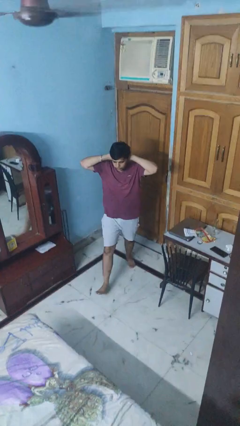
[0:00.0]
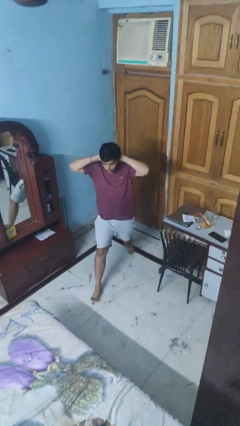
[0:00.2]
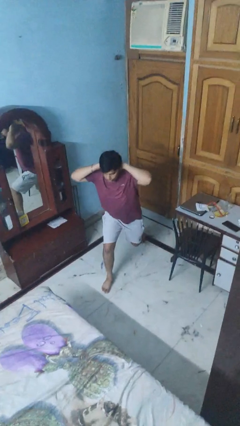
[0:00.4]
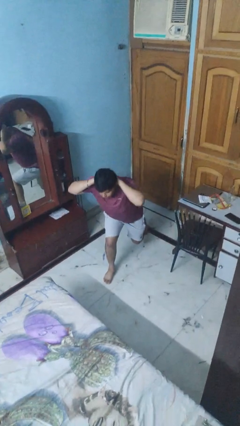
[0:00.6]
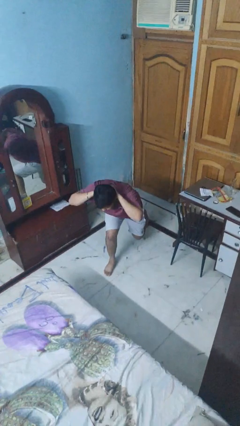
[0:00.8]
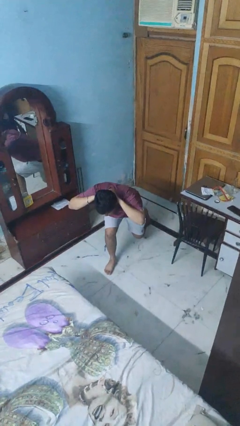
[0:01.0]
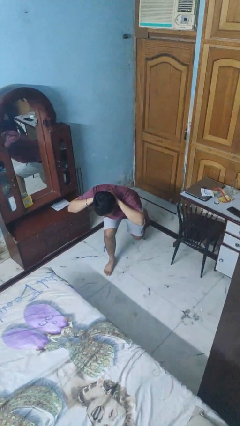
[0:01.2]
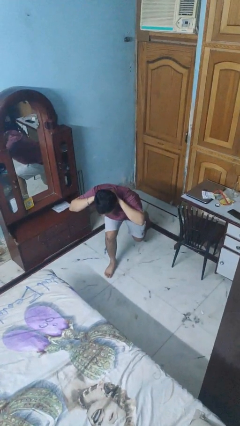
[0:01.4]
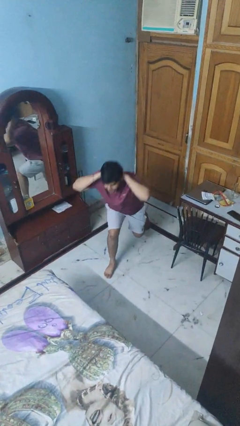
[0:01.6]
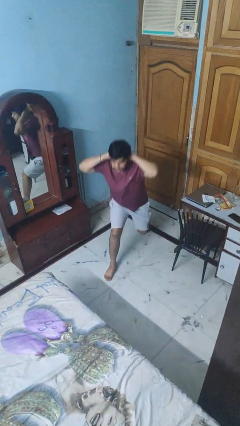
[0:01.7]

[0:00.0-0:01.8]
person exercises with lunges

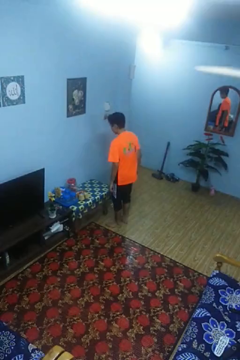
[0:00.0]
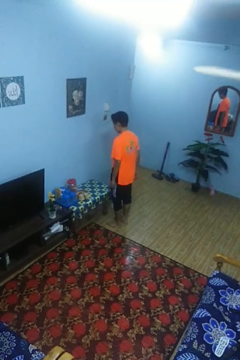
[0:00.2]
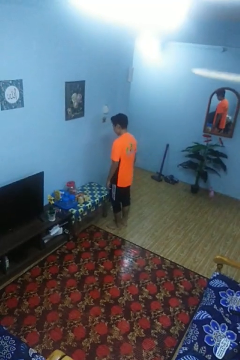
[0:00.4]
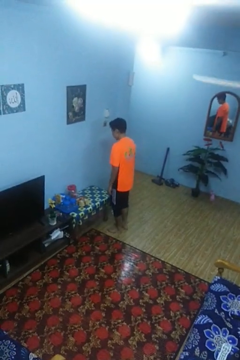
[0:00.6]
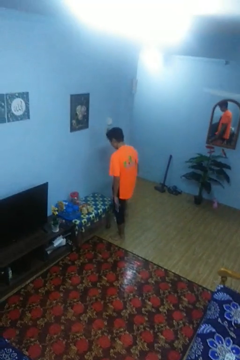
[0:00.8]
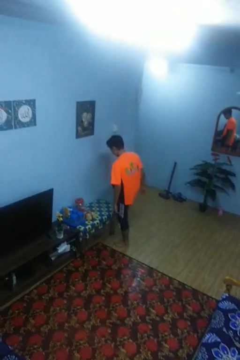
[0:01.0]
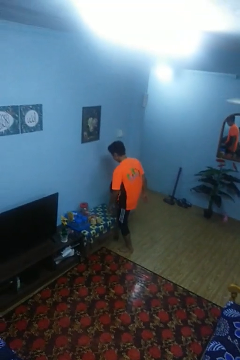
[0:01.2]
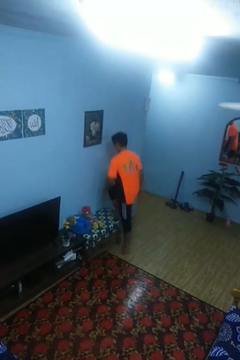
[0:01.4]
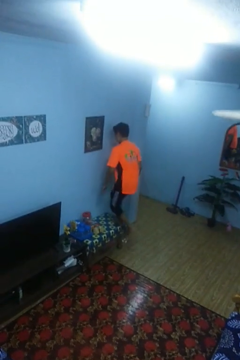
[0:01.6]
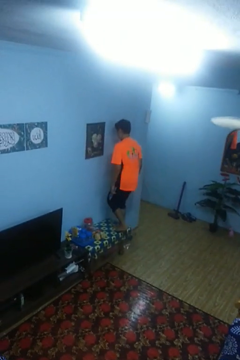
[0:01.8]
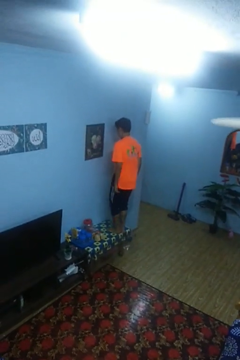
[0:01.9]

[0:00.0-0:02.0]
person climbs on table

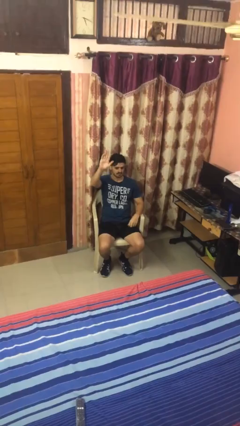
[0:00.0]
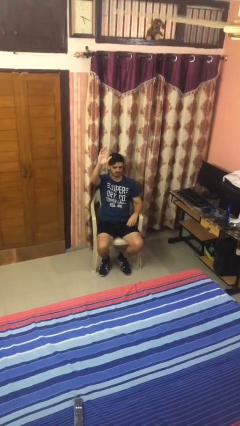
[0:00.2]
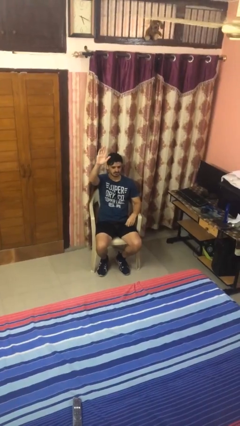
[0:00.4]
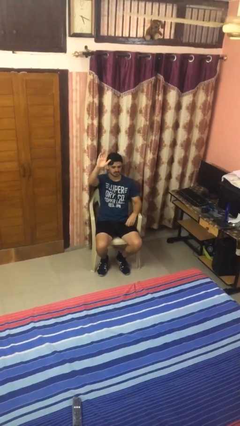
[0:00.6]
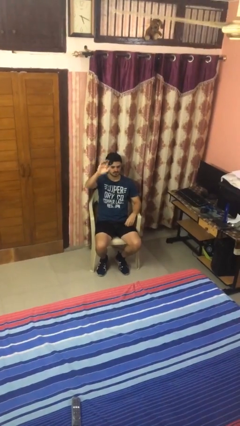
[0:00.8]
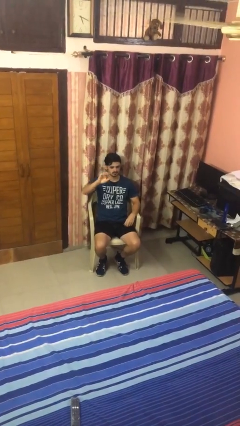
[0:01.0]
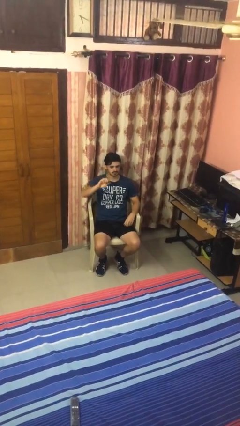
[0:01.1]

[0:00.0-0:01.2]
person gestures lower hand

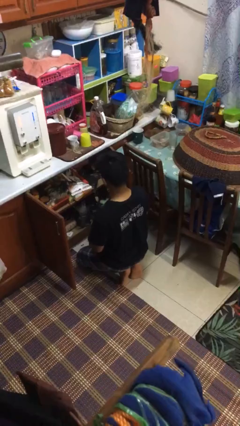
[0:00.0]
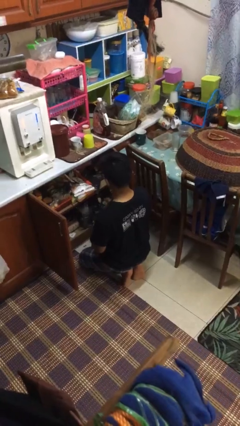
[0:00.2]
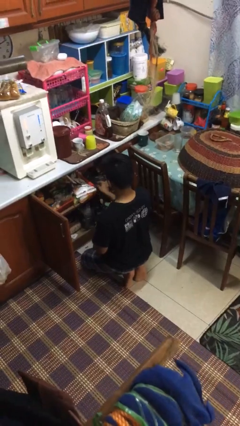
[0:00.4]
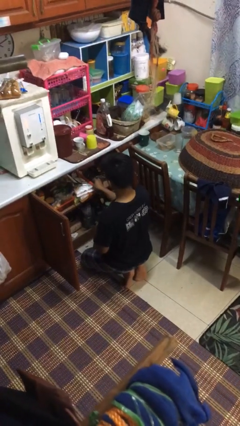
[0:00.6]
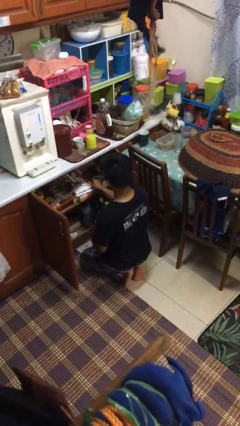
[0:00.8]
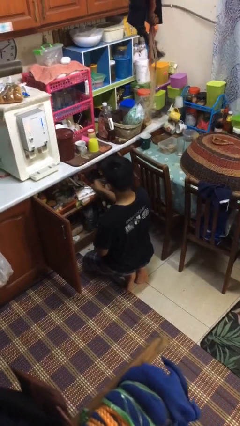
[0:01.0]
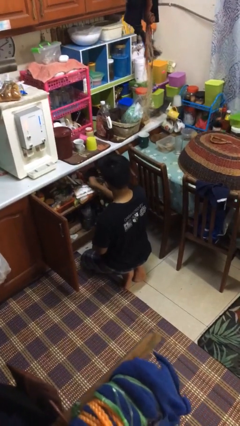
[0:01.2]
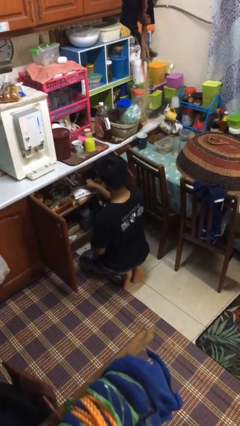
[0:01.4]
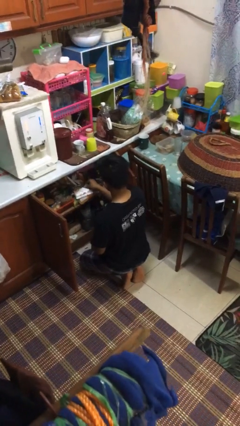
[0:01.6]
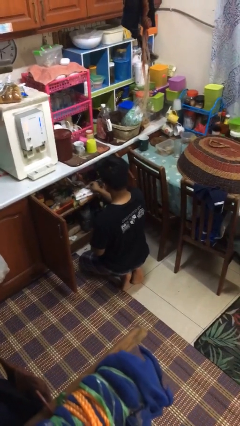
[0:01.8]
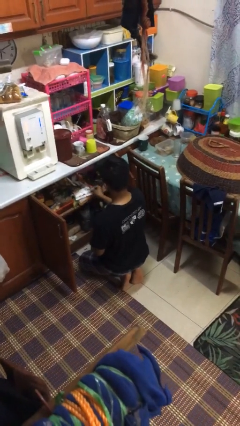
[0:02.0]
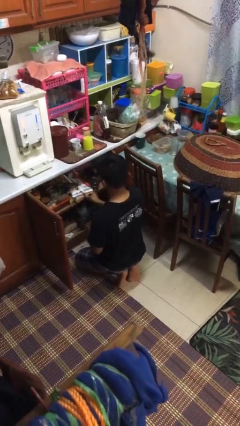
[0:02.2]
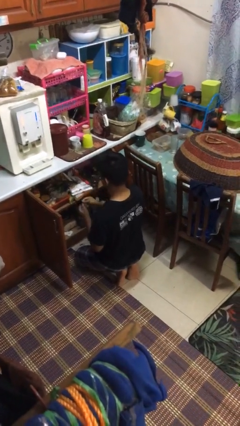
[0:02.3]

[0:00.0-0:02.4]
person takes object from kitchen drawer

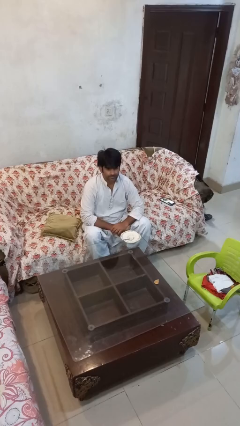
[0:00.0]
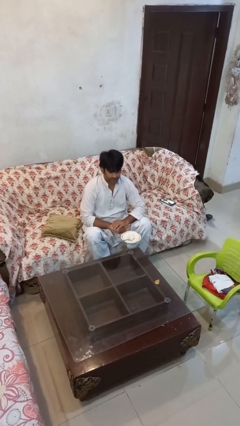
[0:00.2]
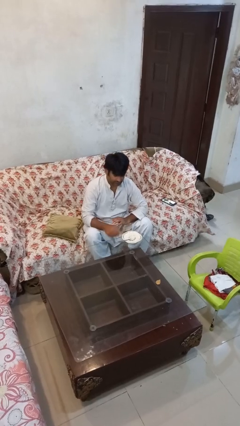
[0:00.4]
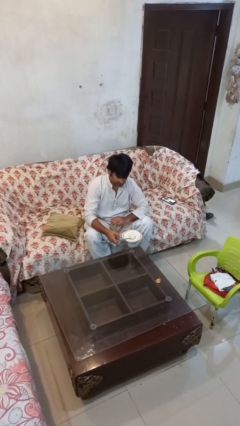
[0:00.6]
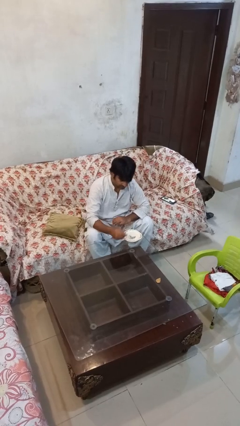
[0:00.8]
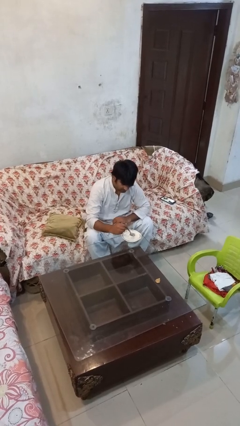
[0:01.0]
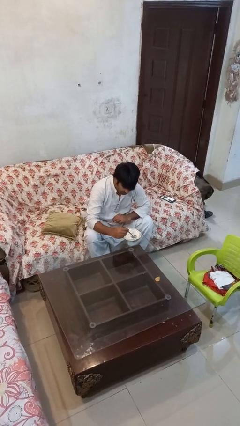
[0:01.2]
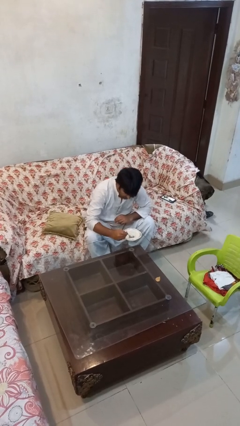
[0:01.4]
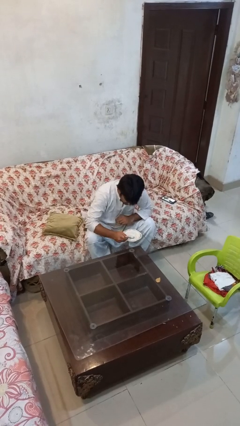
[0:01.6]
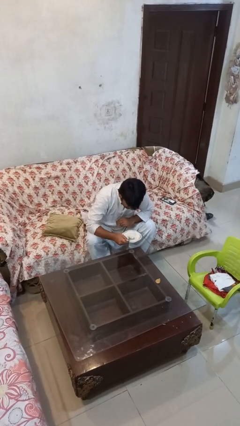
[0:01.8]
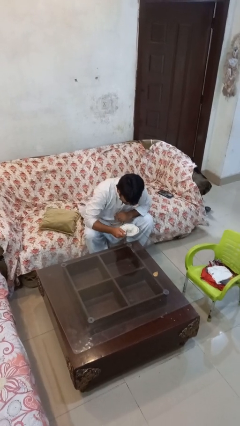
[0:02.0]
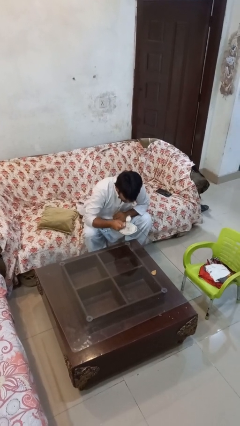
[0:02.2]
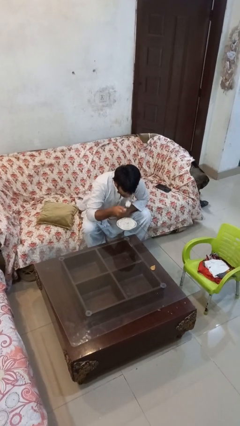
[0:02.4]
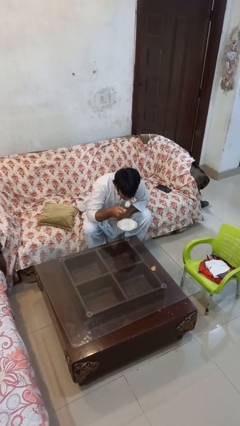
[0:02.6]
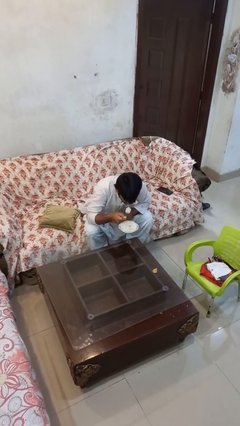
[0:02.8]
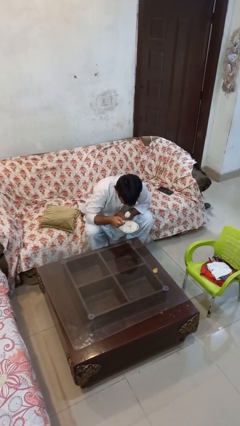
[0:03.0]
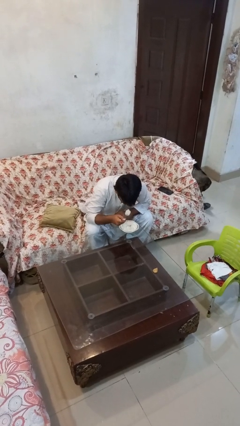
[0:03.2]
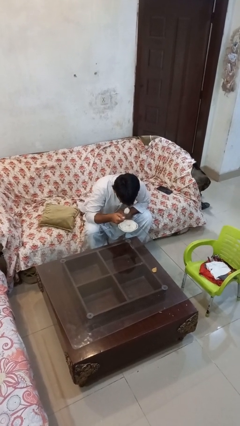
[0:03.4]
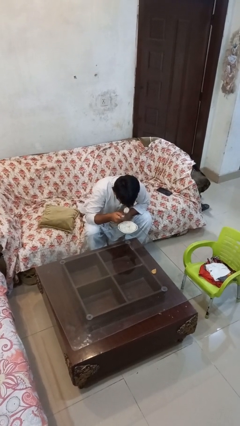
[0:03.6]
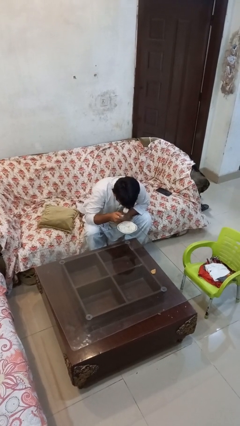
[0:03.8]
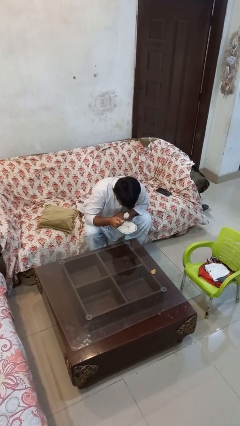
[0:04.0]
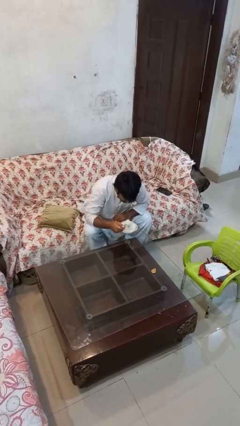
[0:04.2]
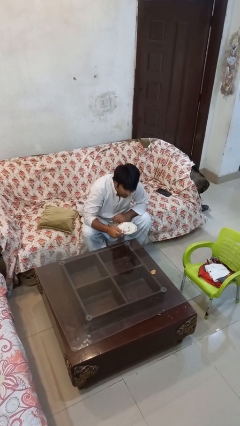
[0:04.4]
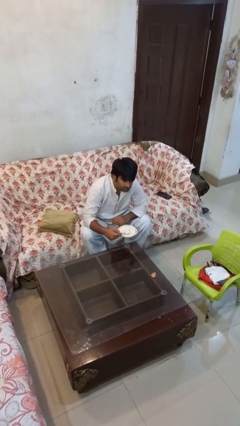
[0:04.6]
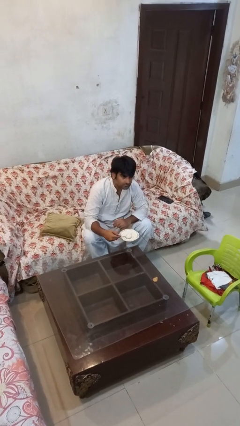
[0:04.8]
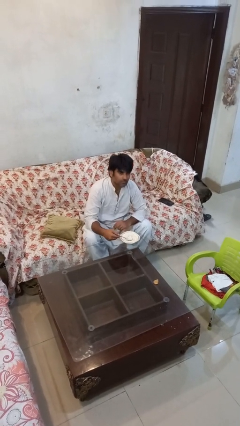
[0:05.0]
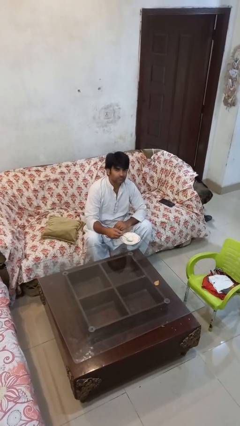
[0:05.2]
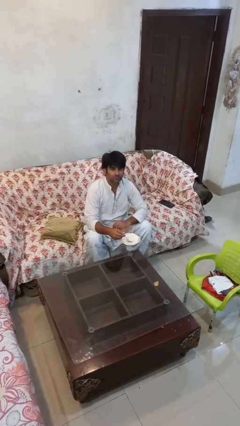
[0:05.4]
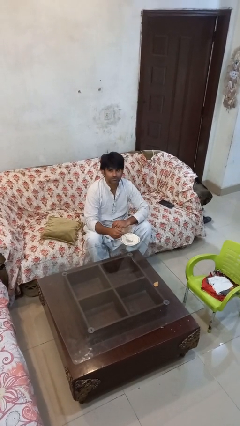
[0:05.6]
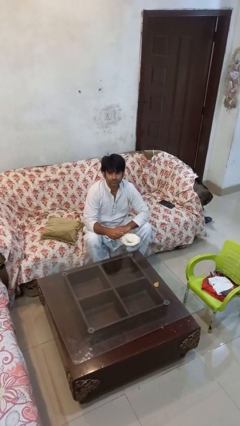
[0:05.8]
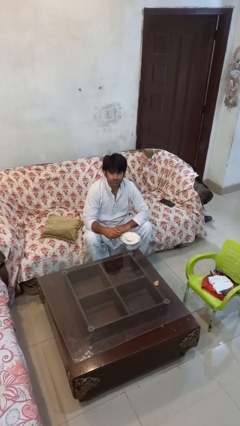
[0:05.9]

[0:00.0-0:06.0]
person eats with utensil

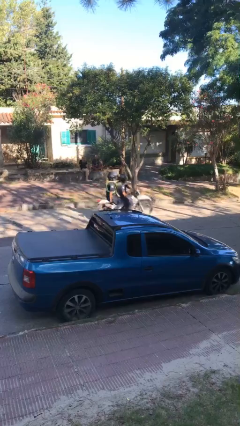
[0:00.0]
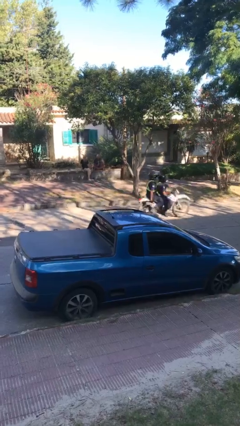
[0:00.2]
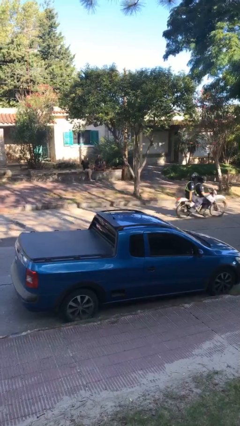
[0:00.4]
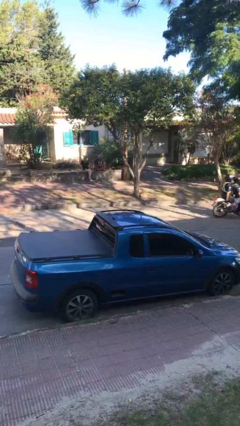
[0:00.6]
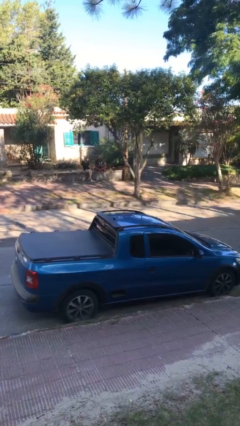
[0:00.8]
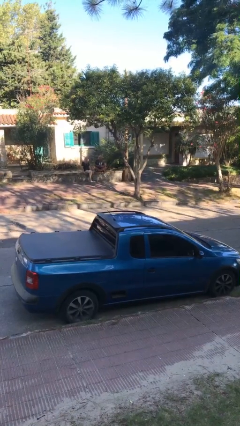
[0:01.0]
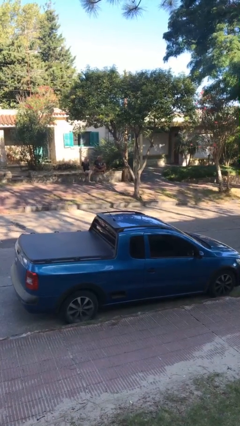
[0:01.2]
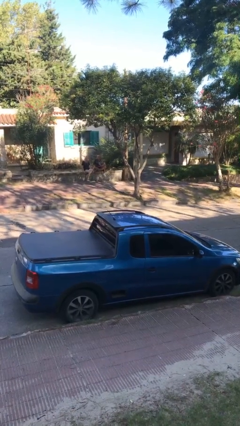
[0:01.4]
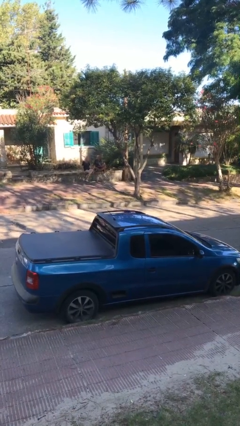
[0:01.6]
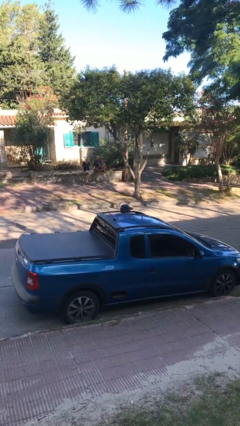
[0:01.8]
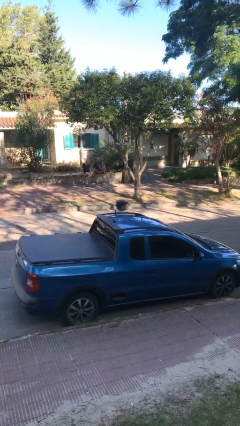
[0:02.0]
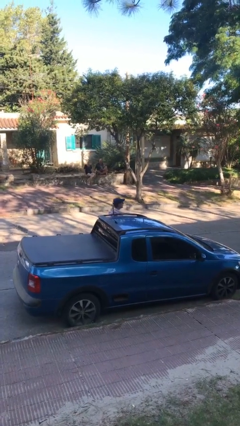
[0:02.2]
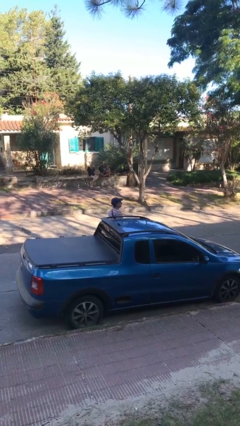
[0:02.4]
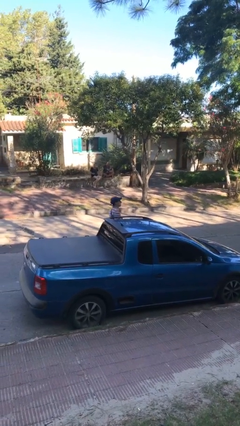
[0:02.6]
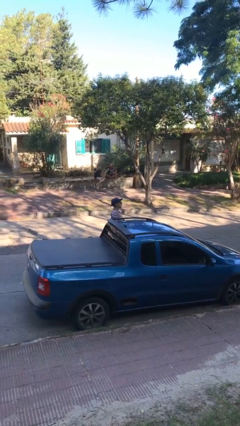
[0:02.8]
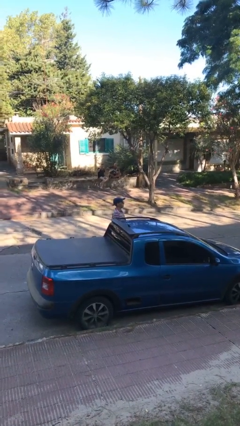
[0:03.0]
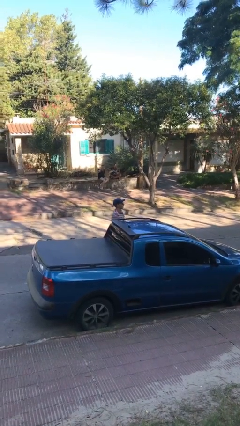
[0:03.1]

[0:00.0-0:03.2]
person exits car

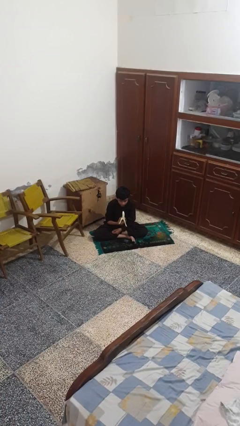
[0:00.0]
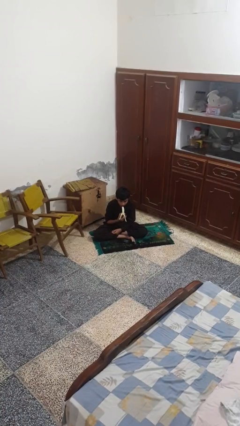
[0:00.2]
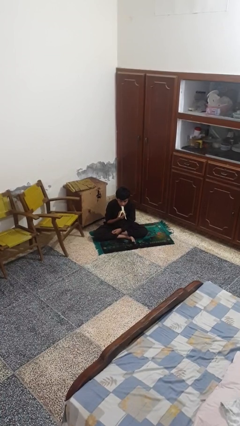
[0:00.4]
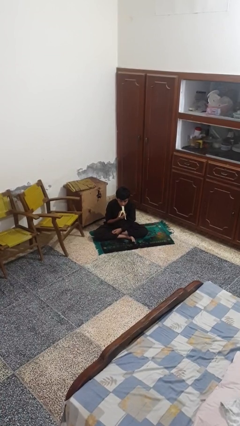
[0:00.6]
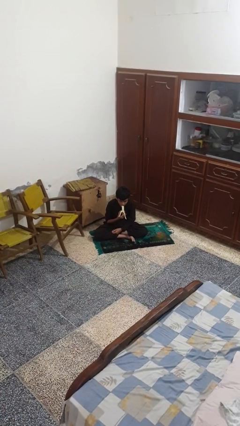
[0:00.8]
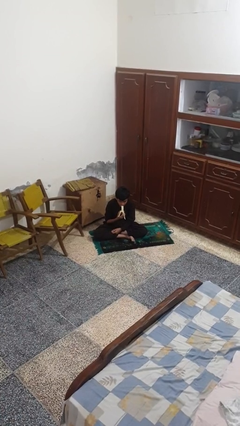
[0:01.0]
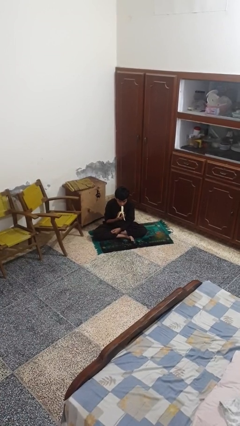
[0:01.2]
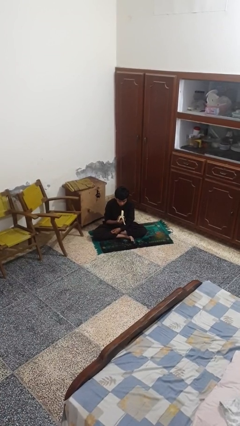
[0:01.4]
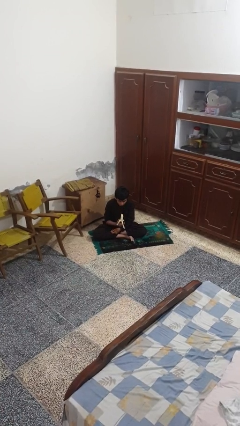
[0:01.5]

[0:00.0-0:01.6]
person eats banana
